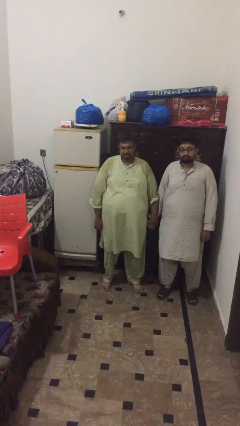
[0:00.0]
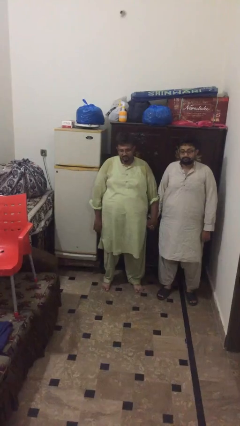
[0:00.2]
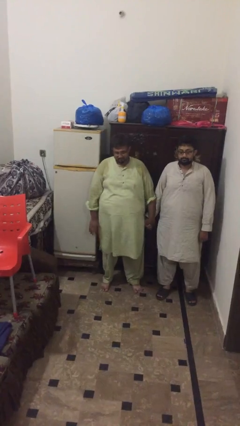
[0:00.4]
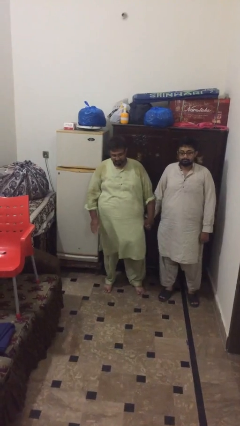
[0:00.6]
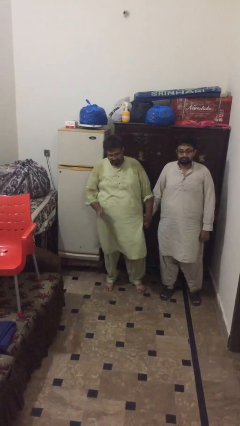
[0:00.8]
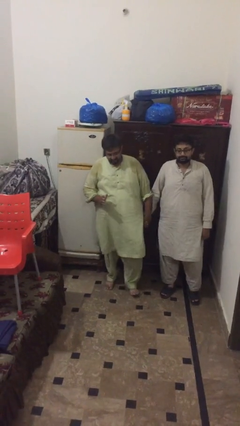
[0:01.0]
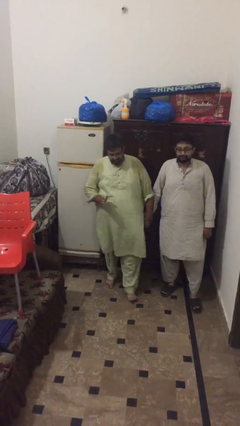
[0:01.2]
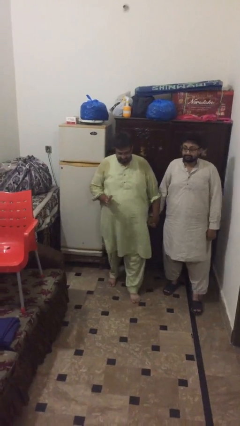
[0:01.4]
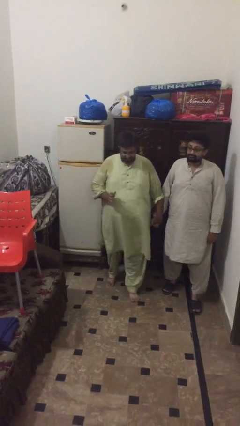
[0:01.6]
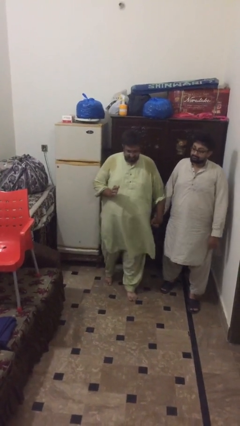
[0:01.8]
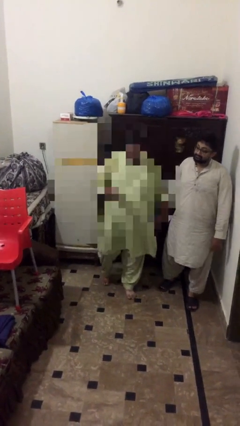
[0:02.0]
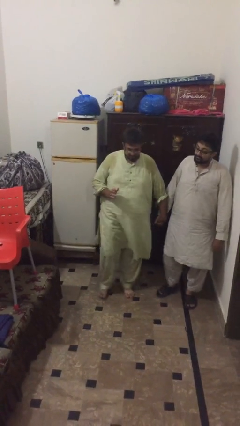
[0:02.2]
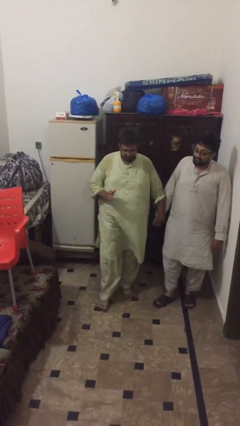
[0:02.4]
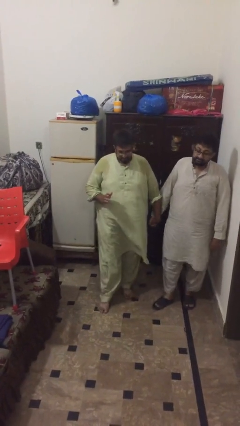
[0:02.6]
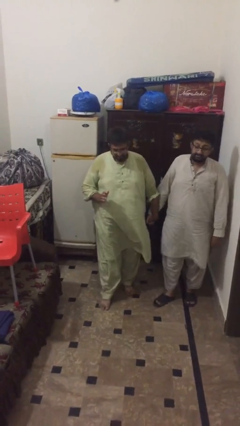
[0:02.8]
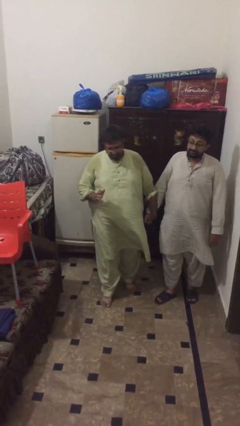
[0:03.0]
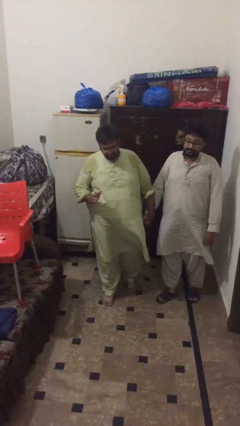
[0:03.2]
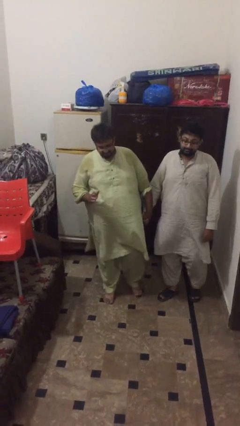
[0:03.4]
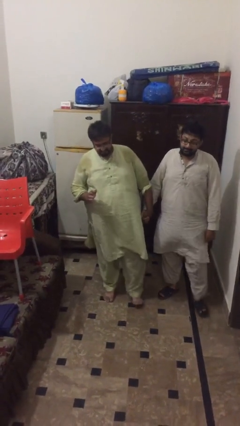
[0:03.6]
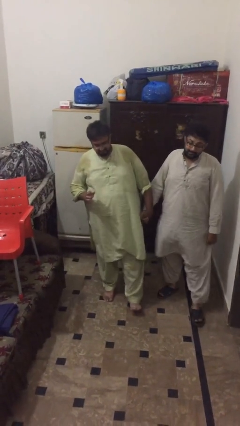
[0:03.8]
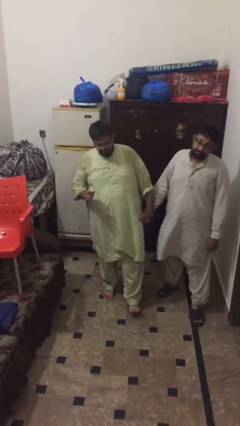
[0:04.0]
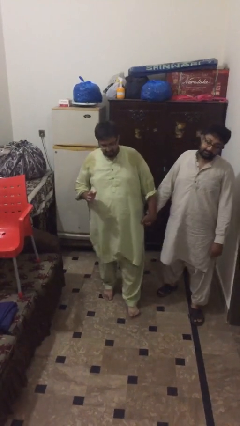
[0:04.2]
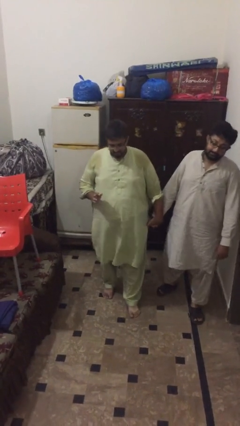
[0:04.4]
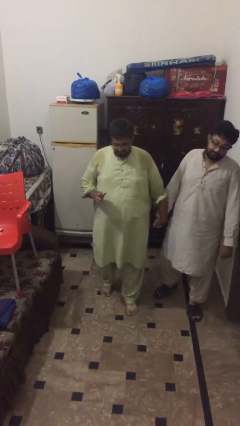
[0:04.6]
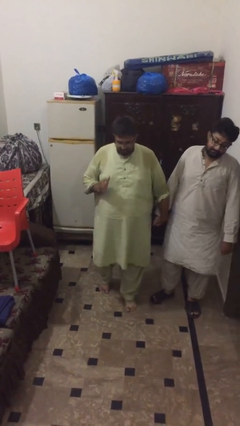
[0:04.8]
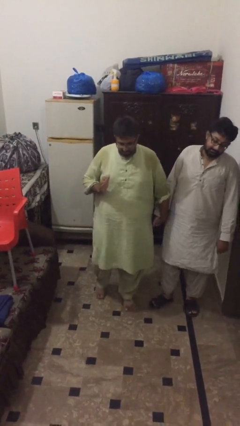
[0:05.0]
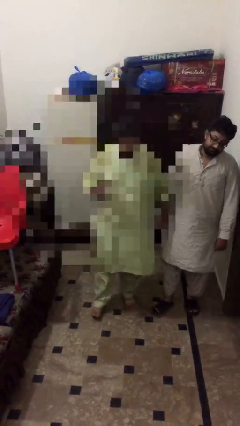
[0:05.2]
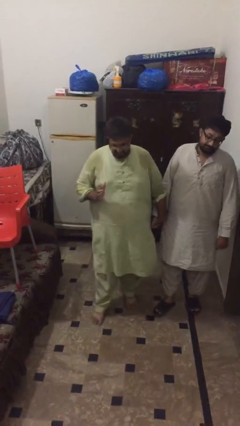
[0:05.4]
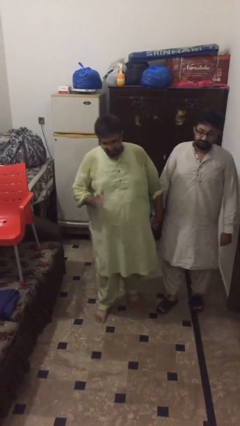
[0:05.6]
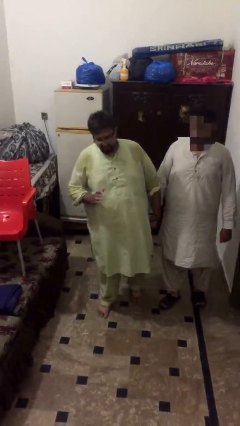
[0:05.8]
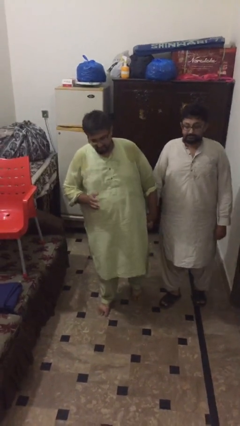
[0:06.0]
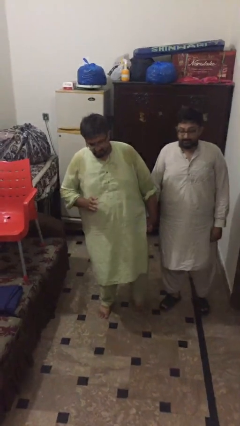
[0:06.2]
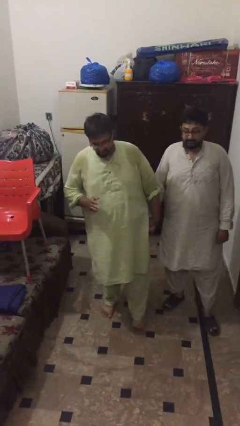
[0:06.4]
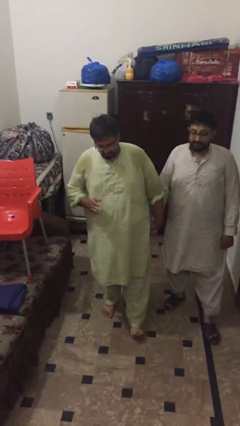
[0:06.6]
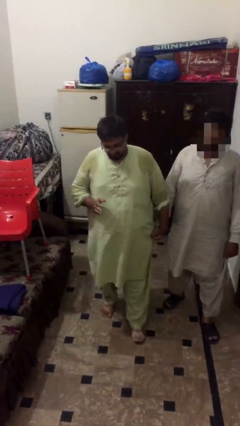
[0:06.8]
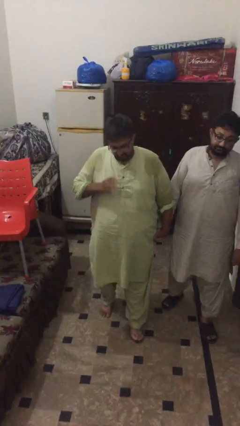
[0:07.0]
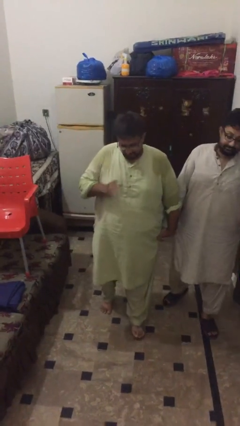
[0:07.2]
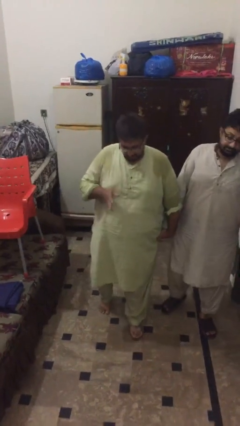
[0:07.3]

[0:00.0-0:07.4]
person holds hand

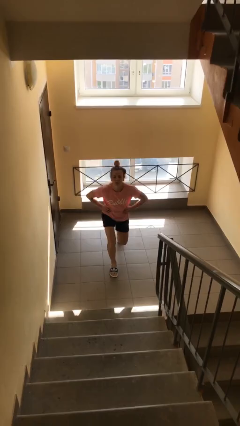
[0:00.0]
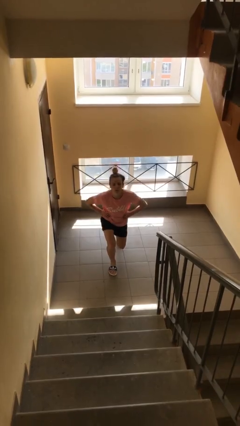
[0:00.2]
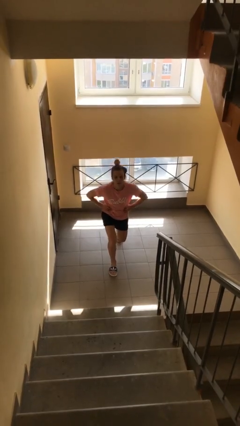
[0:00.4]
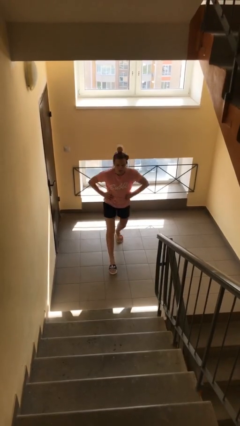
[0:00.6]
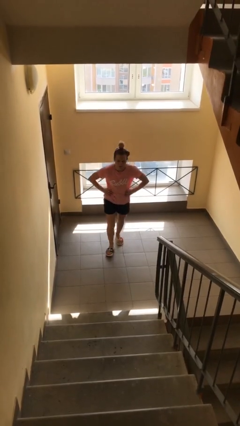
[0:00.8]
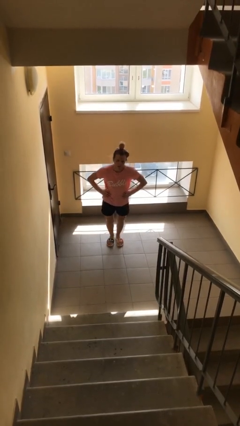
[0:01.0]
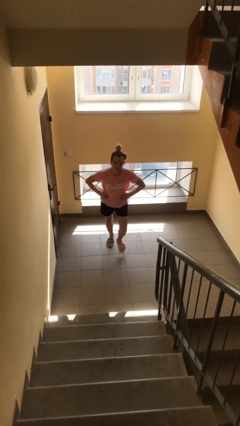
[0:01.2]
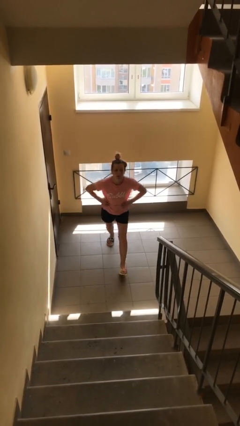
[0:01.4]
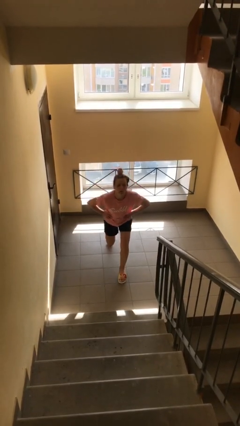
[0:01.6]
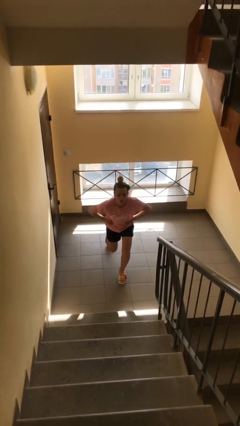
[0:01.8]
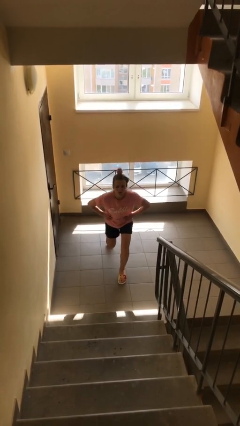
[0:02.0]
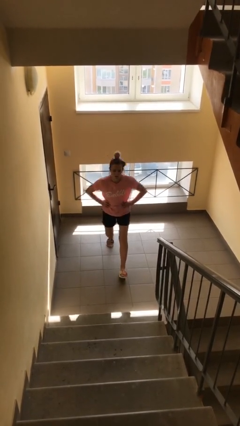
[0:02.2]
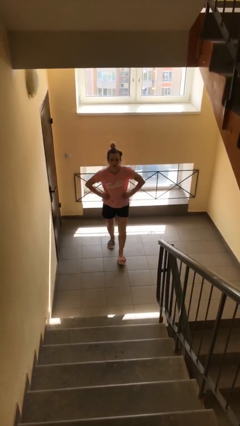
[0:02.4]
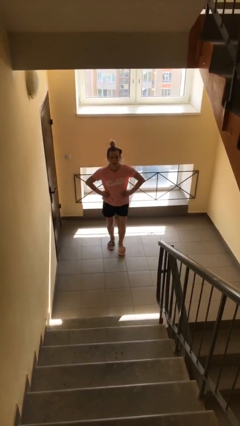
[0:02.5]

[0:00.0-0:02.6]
person exercises with lunges

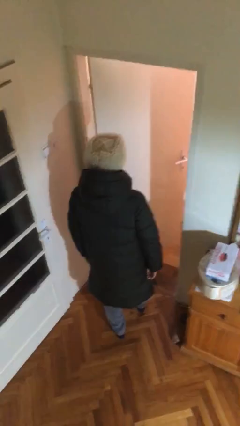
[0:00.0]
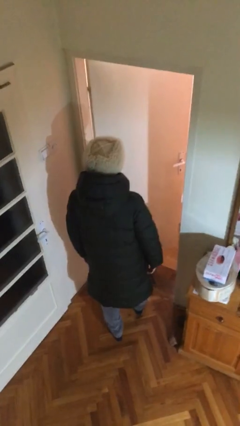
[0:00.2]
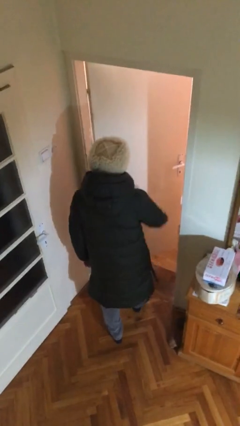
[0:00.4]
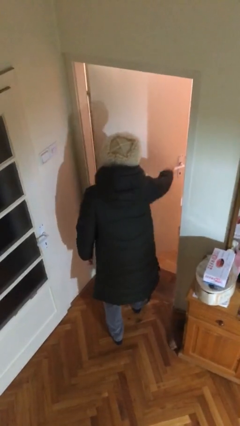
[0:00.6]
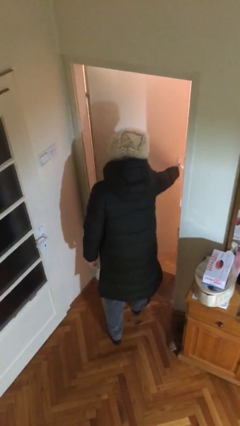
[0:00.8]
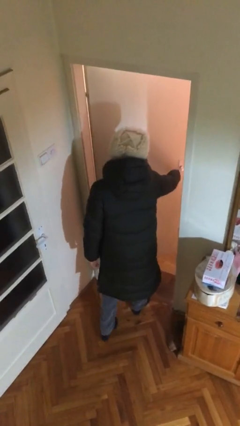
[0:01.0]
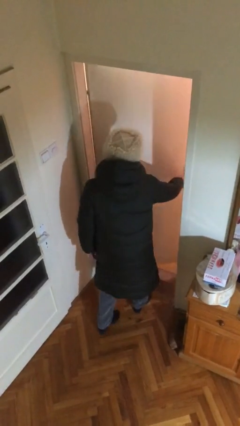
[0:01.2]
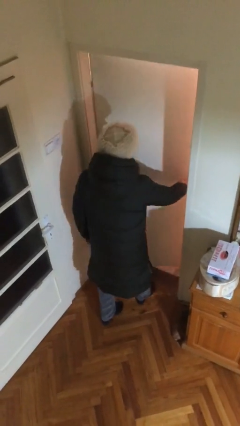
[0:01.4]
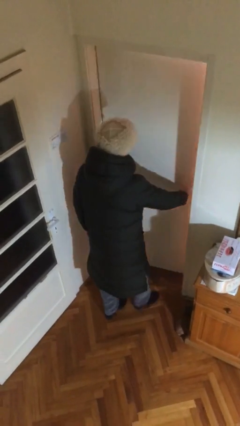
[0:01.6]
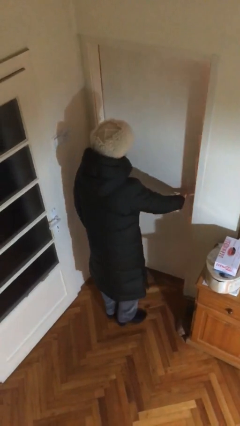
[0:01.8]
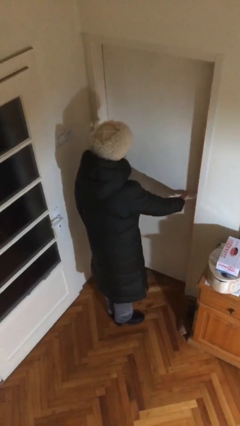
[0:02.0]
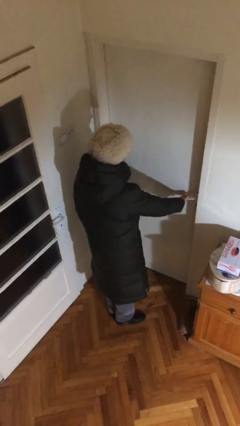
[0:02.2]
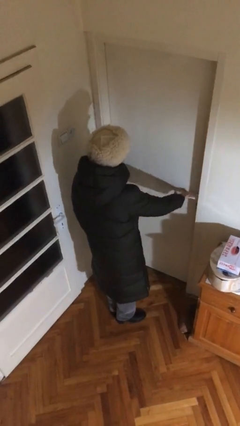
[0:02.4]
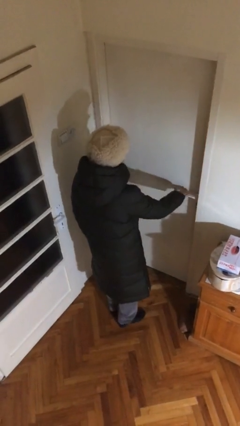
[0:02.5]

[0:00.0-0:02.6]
person closes facility door

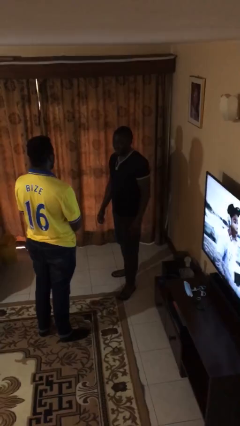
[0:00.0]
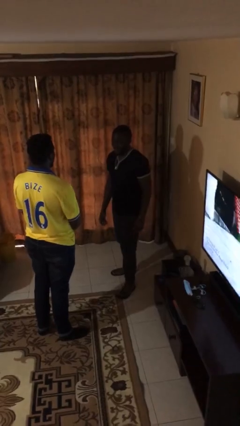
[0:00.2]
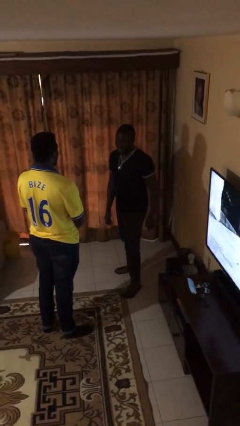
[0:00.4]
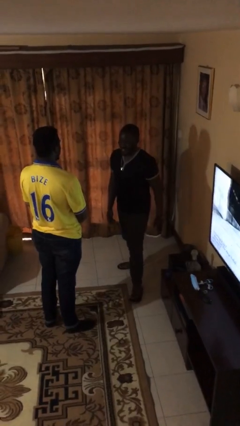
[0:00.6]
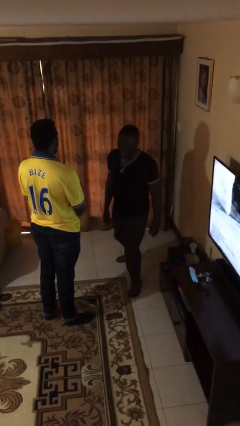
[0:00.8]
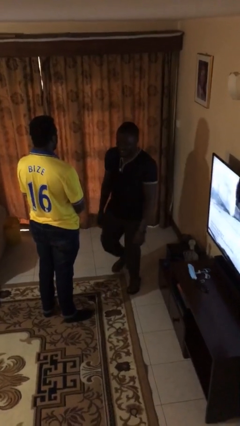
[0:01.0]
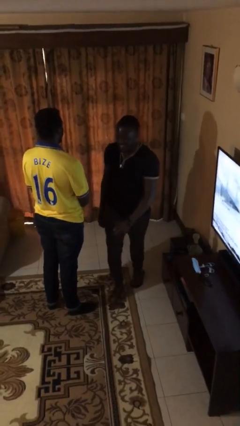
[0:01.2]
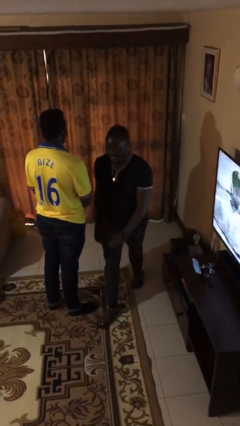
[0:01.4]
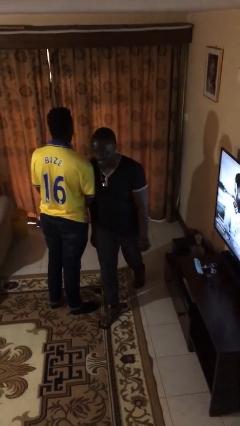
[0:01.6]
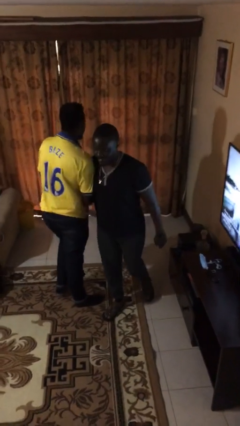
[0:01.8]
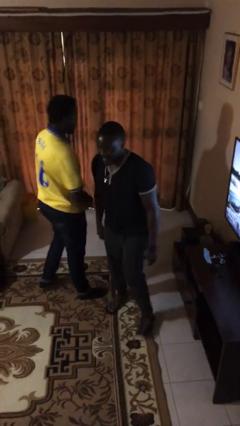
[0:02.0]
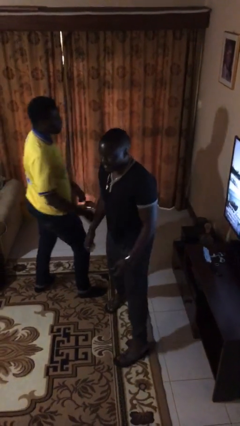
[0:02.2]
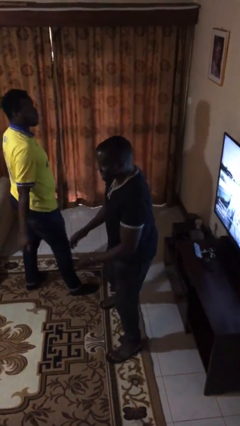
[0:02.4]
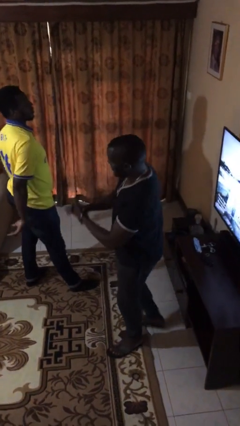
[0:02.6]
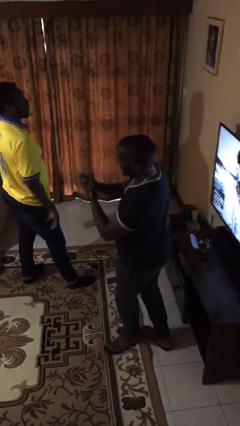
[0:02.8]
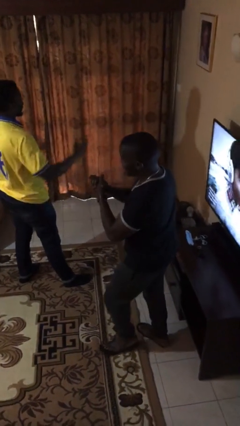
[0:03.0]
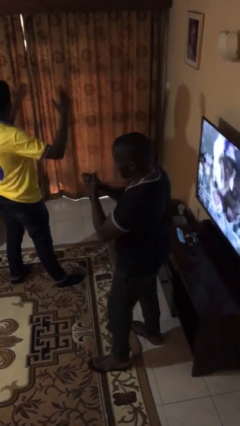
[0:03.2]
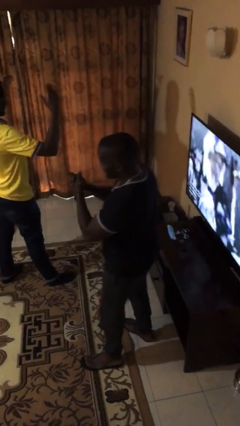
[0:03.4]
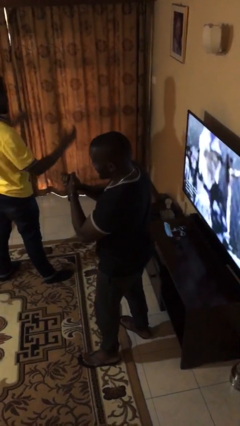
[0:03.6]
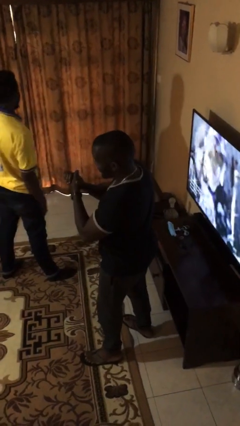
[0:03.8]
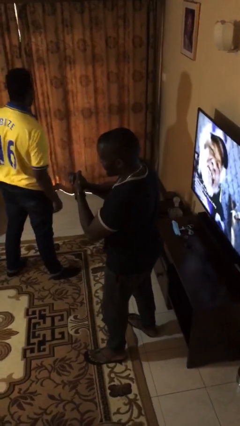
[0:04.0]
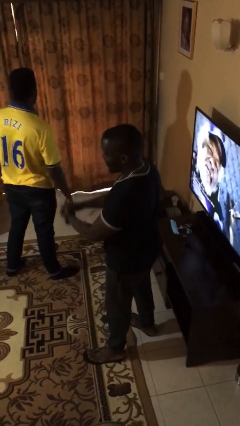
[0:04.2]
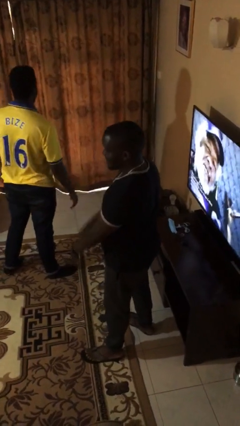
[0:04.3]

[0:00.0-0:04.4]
person bumps into person

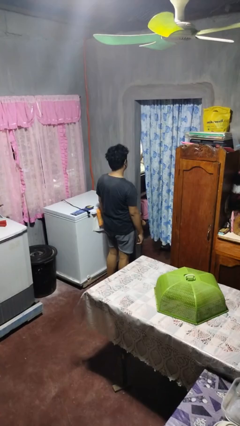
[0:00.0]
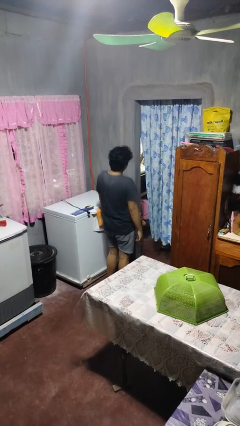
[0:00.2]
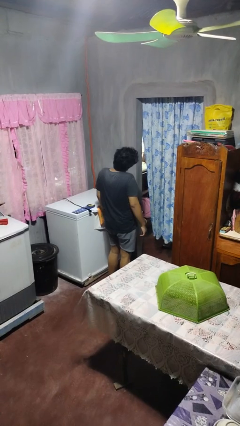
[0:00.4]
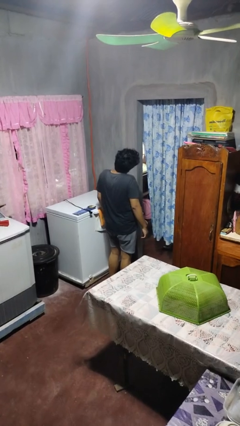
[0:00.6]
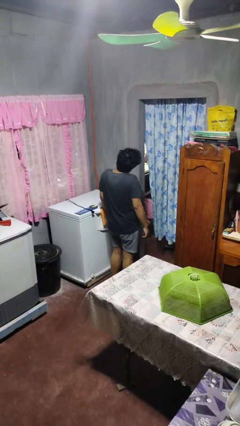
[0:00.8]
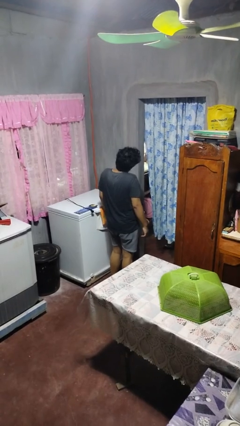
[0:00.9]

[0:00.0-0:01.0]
person shrugs
